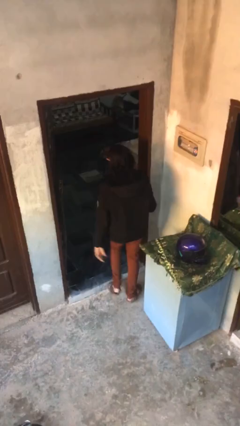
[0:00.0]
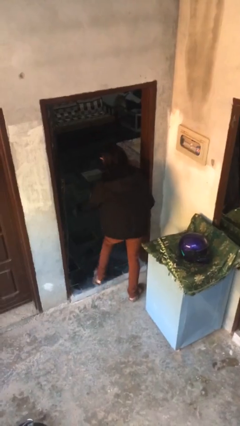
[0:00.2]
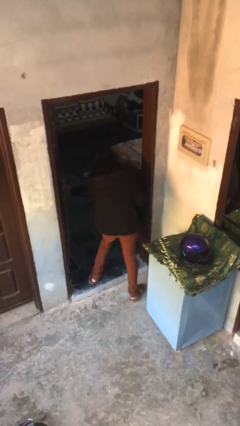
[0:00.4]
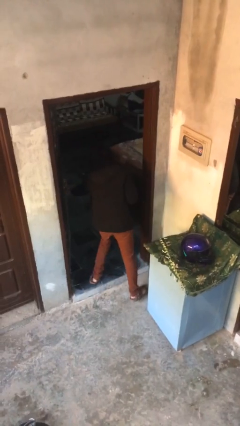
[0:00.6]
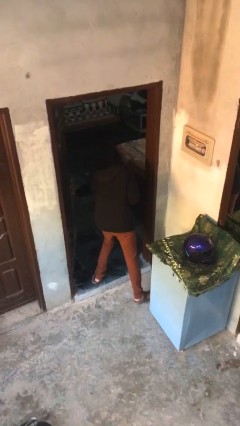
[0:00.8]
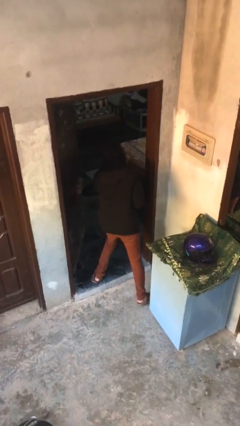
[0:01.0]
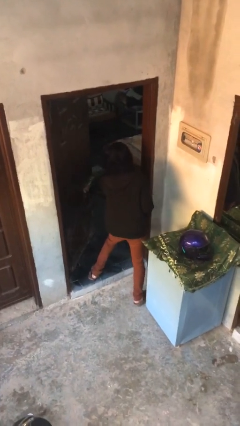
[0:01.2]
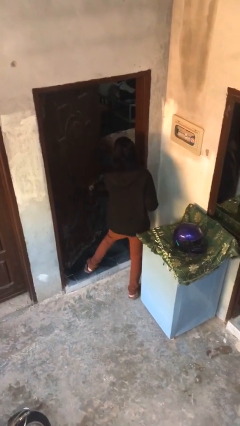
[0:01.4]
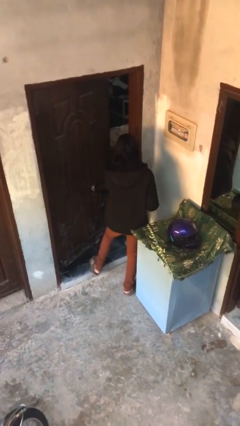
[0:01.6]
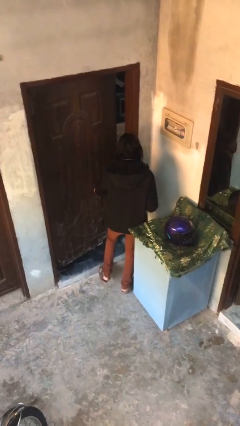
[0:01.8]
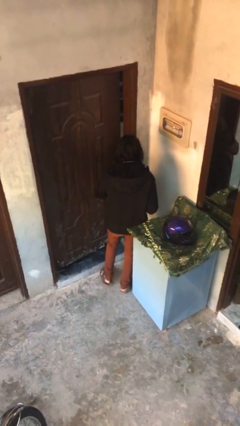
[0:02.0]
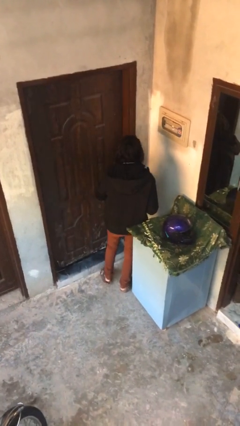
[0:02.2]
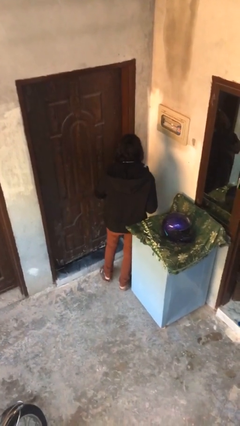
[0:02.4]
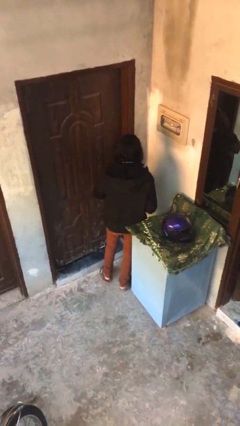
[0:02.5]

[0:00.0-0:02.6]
person closes facility door

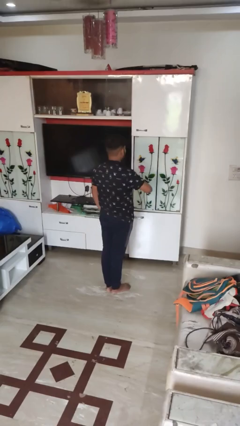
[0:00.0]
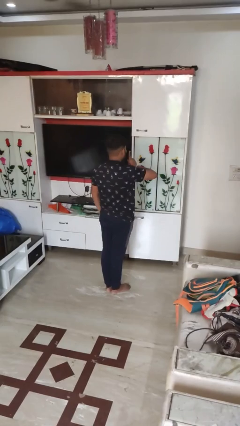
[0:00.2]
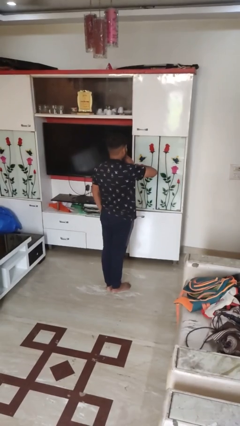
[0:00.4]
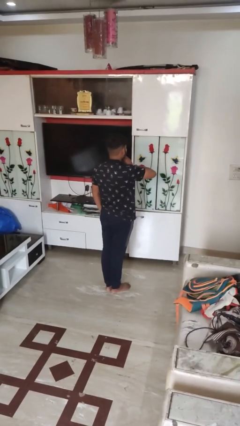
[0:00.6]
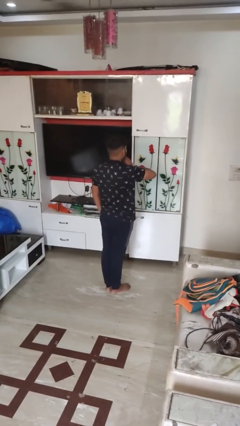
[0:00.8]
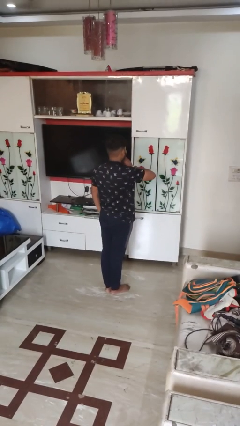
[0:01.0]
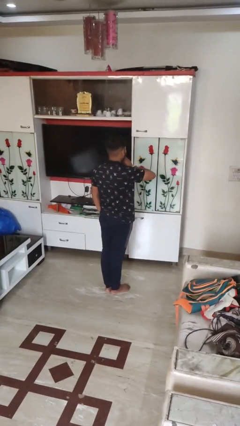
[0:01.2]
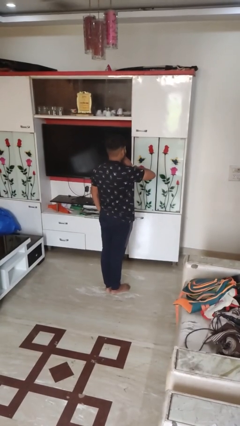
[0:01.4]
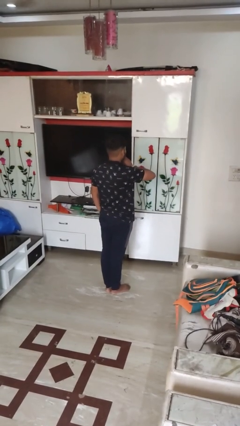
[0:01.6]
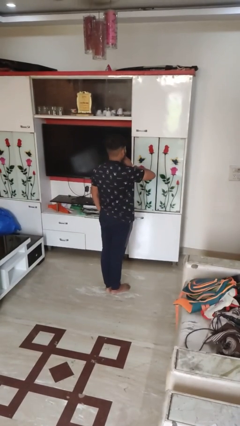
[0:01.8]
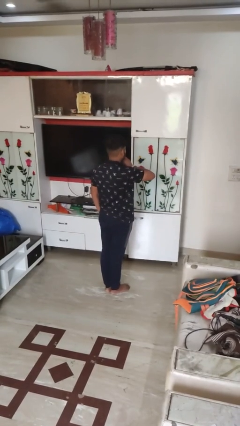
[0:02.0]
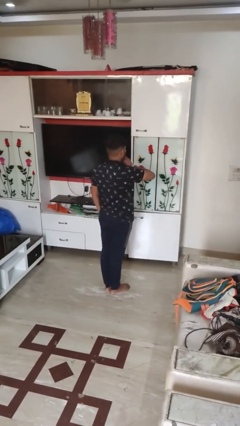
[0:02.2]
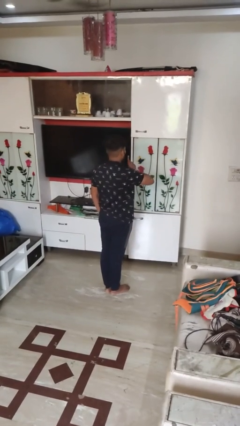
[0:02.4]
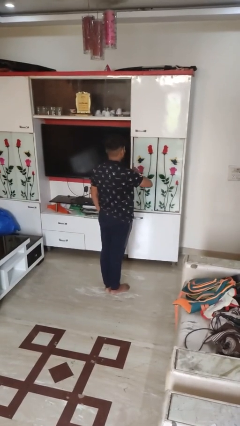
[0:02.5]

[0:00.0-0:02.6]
person gestures be quiet

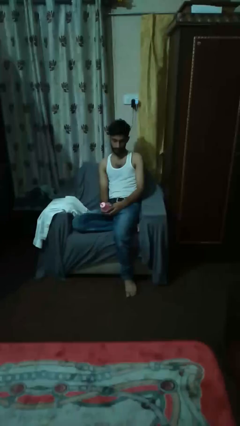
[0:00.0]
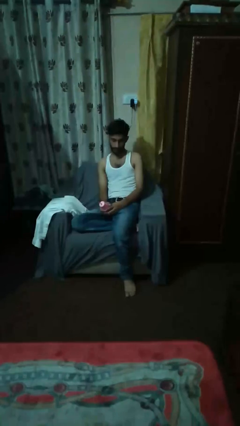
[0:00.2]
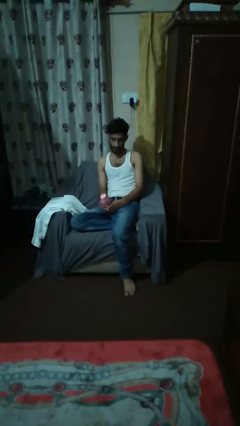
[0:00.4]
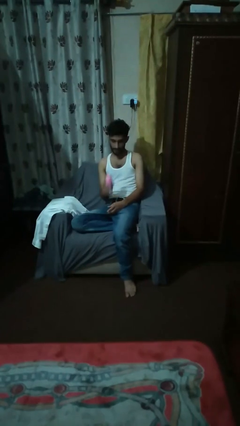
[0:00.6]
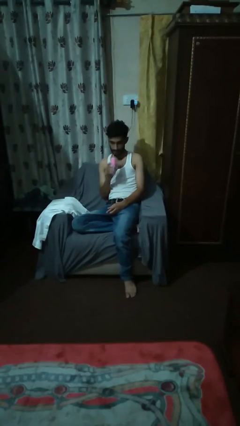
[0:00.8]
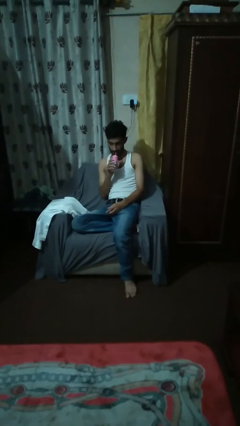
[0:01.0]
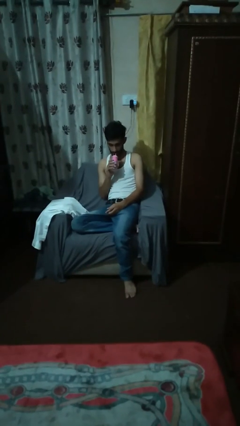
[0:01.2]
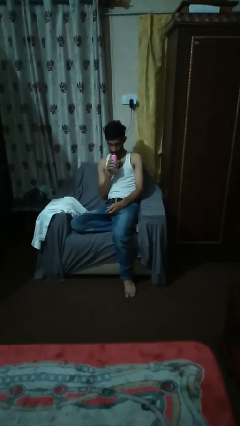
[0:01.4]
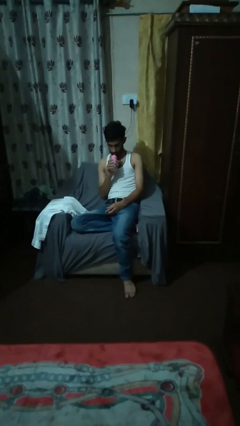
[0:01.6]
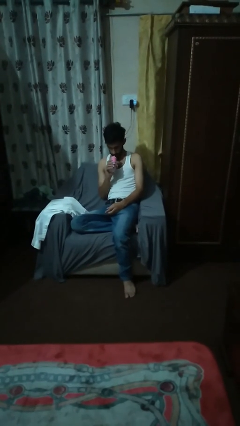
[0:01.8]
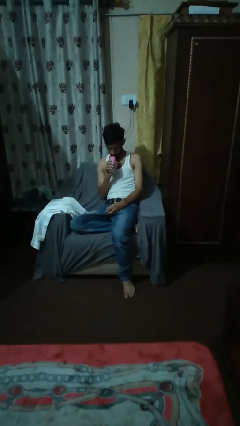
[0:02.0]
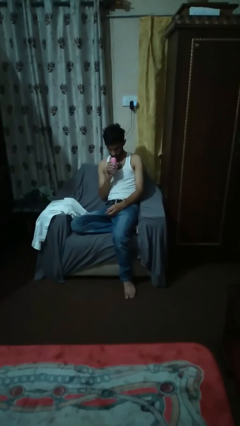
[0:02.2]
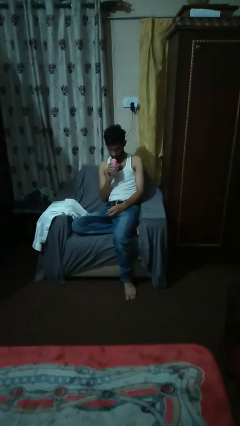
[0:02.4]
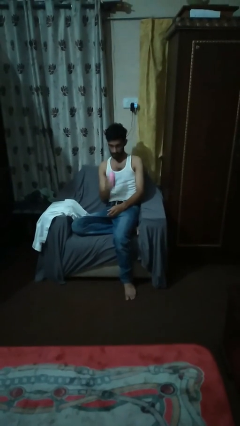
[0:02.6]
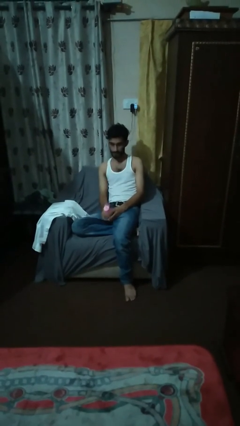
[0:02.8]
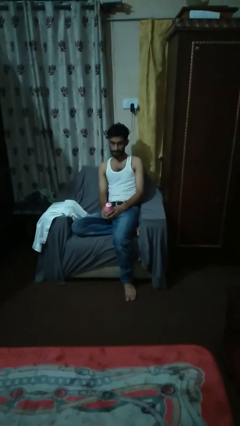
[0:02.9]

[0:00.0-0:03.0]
person drinks from straw

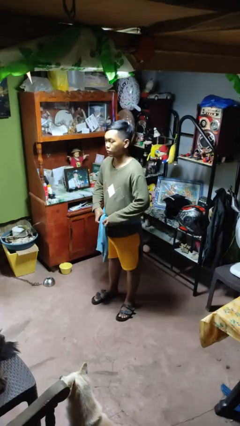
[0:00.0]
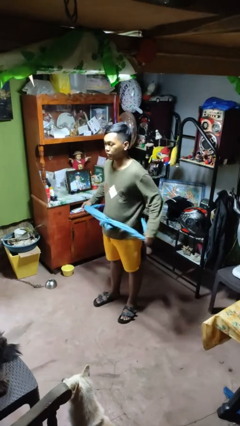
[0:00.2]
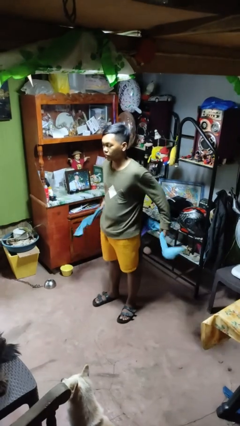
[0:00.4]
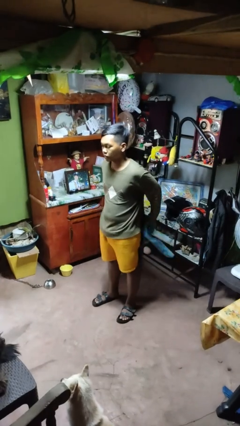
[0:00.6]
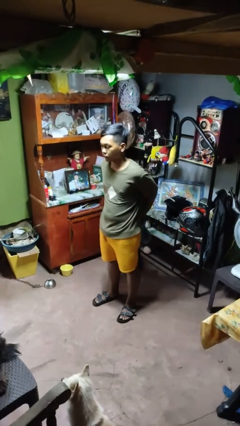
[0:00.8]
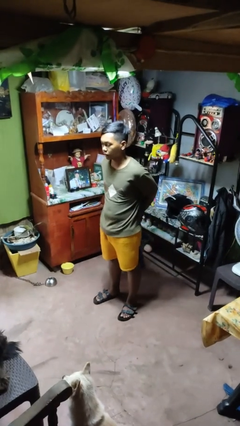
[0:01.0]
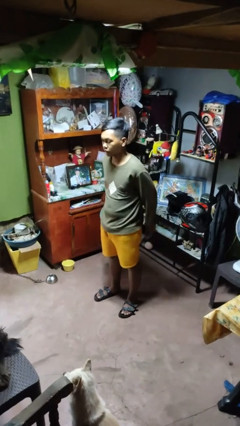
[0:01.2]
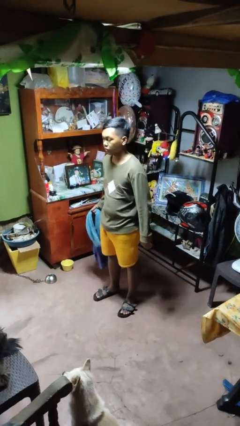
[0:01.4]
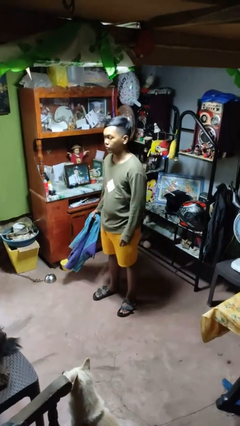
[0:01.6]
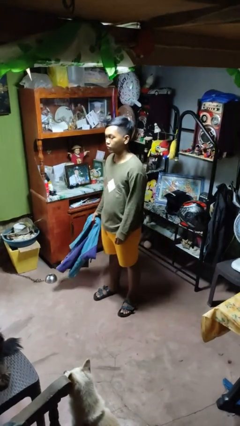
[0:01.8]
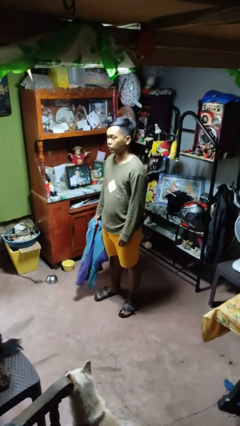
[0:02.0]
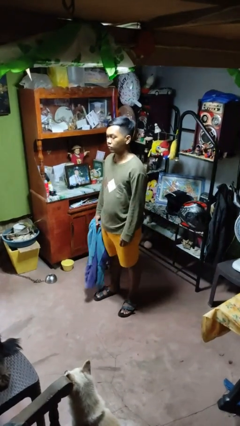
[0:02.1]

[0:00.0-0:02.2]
person unties jacket around waist

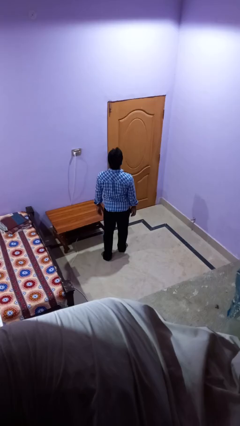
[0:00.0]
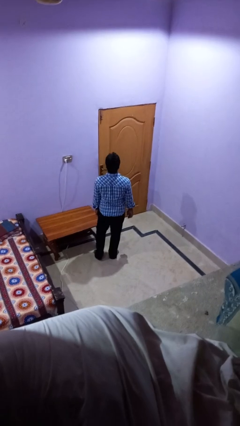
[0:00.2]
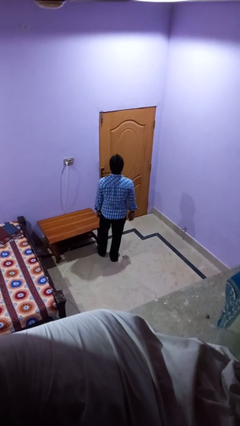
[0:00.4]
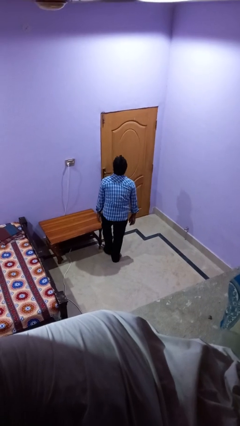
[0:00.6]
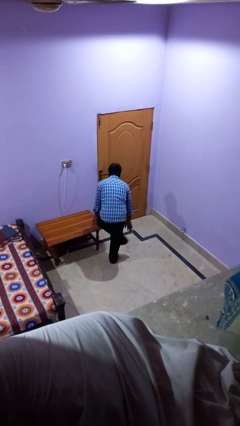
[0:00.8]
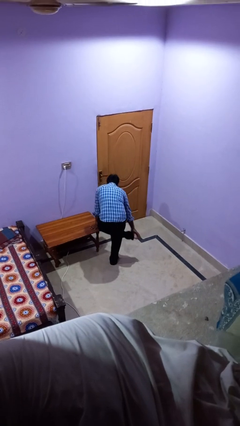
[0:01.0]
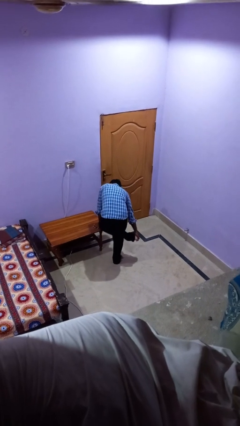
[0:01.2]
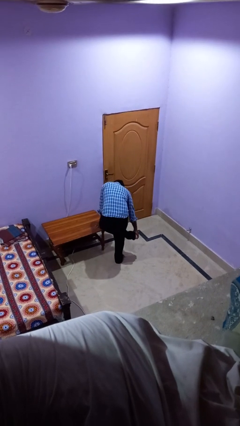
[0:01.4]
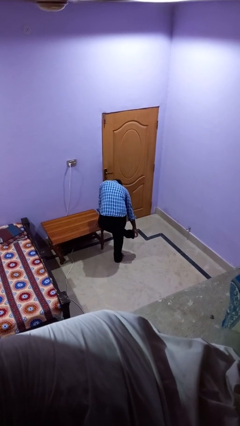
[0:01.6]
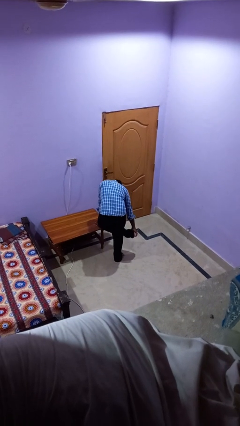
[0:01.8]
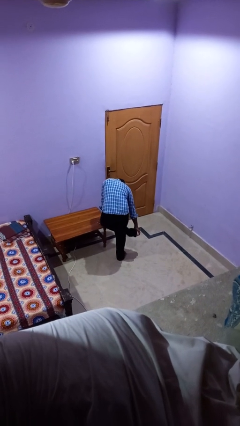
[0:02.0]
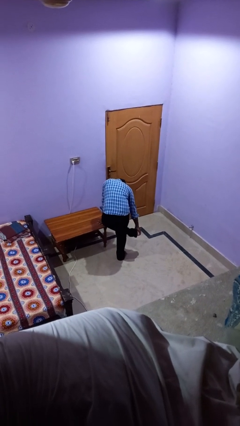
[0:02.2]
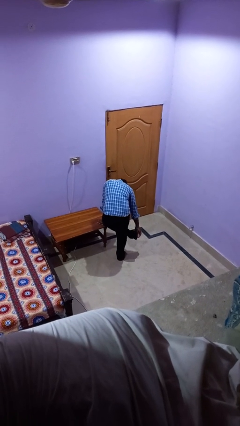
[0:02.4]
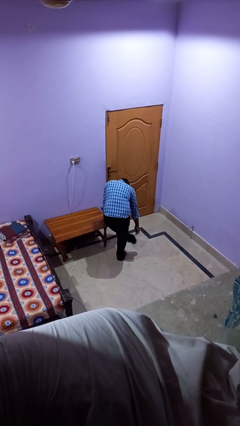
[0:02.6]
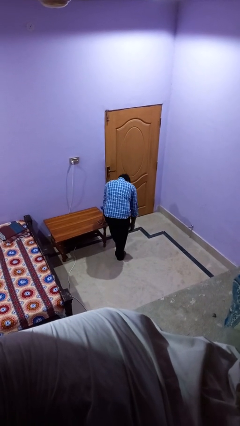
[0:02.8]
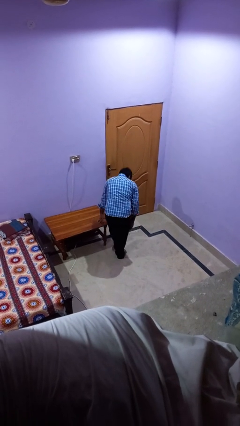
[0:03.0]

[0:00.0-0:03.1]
person stubs toe

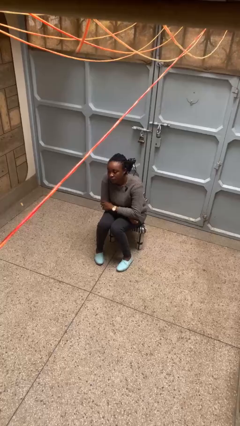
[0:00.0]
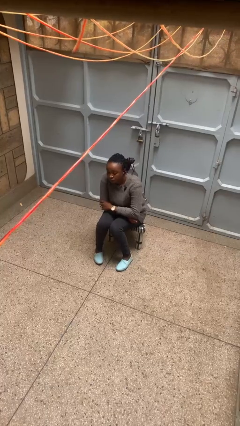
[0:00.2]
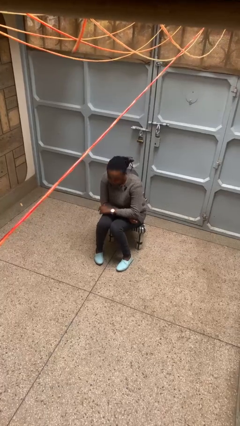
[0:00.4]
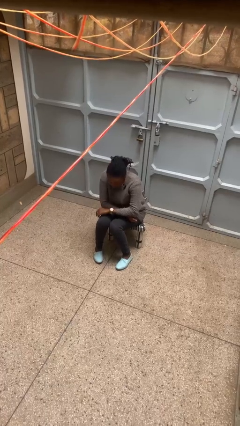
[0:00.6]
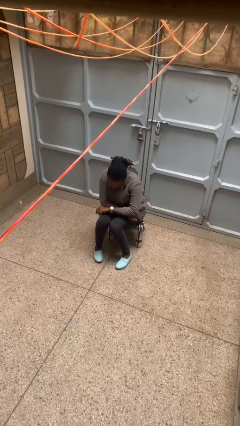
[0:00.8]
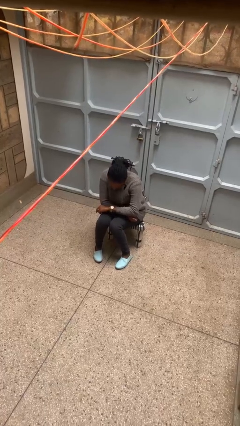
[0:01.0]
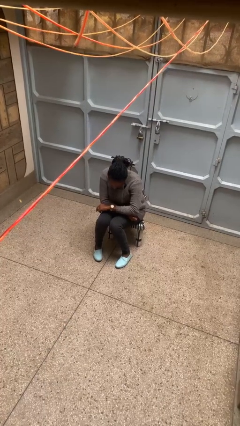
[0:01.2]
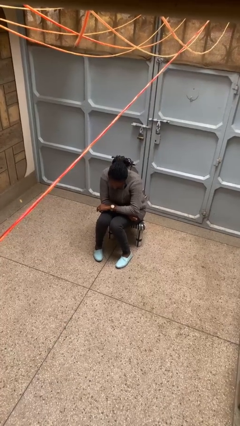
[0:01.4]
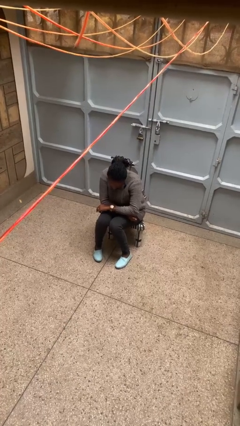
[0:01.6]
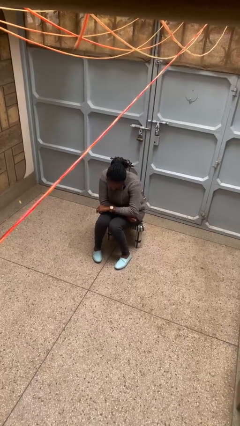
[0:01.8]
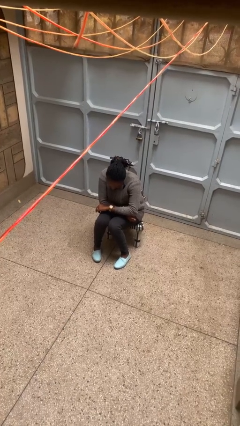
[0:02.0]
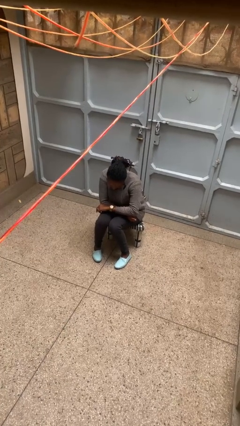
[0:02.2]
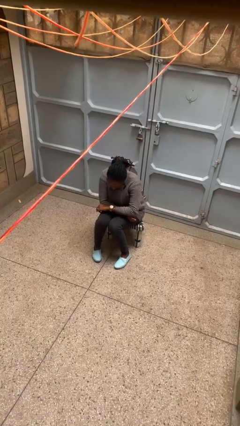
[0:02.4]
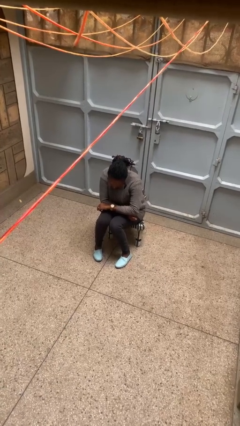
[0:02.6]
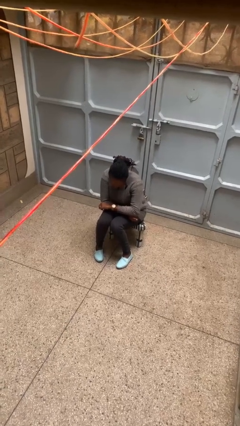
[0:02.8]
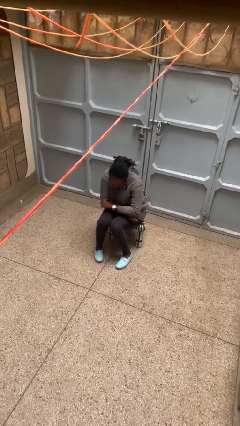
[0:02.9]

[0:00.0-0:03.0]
person looks at wristwatch

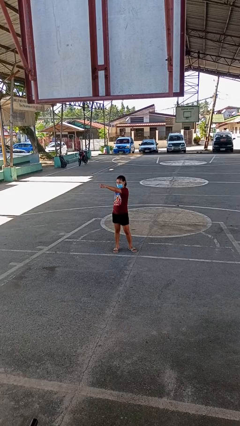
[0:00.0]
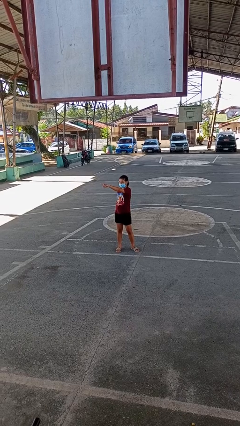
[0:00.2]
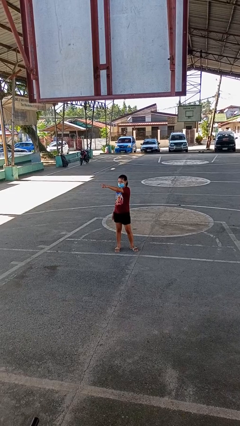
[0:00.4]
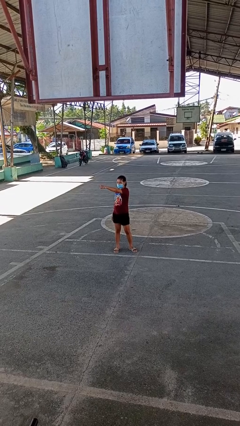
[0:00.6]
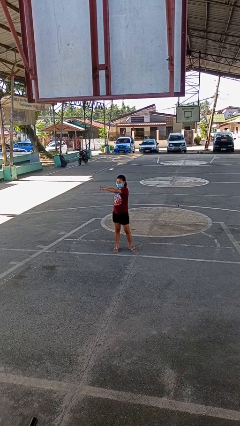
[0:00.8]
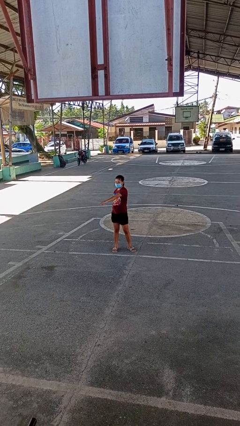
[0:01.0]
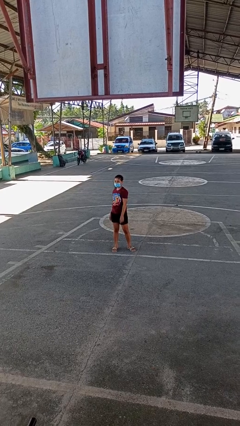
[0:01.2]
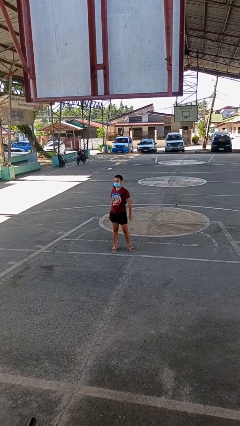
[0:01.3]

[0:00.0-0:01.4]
person points at person
